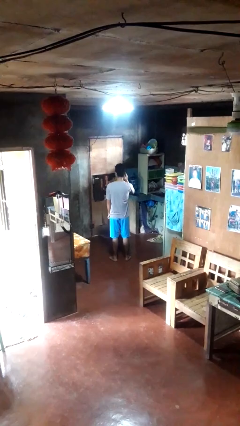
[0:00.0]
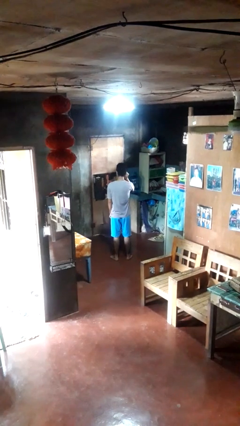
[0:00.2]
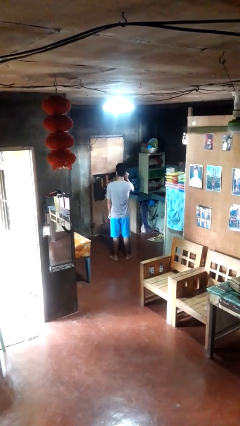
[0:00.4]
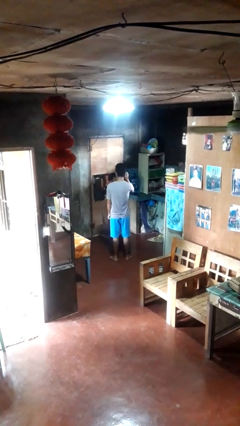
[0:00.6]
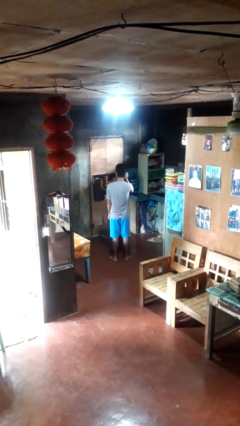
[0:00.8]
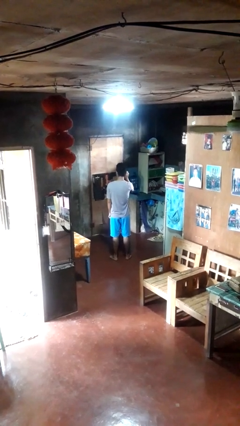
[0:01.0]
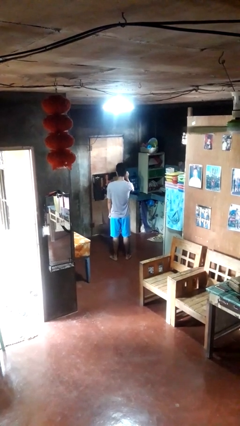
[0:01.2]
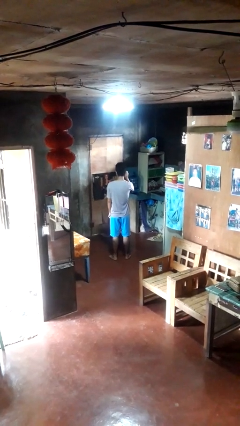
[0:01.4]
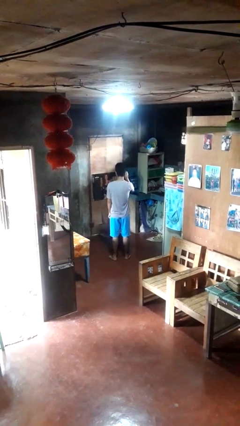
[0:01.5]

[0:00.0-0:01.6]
person touches earlobe

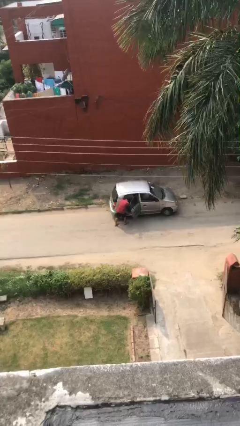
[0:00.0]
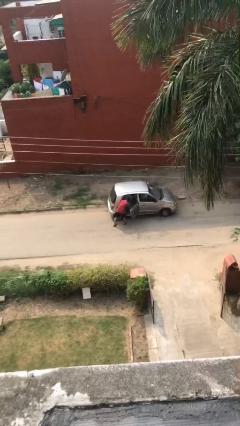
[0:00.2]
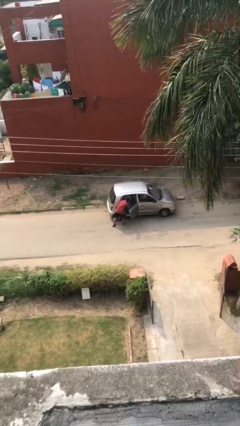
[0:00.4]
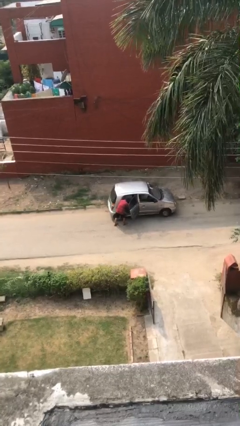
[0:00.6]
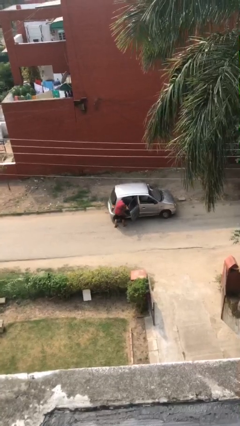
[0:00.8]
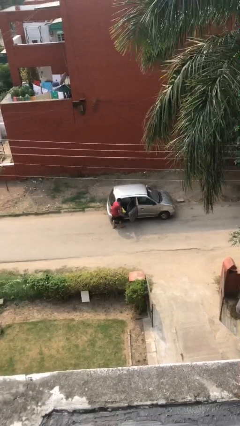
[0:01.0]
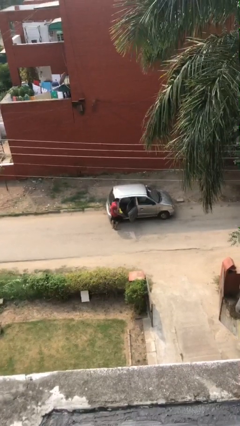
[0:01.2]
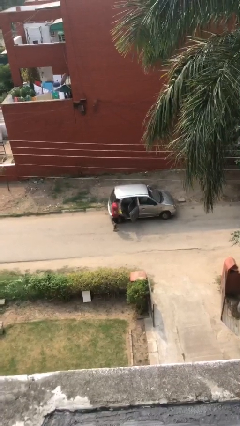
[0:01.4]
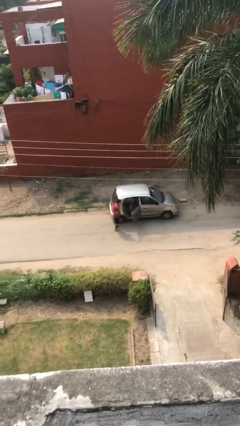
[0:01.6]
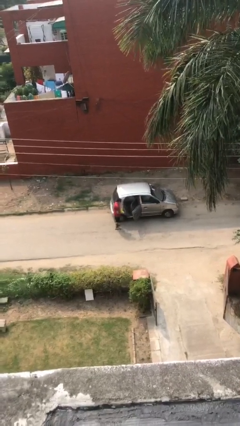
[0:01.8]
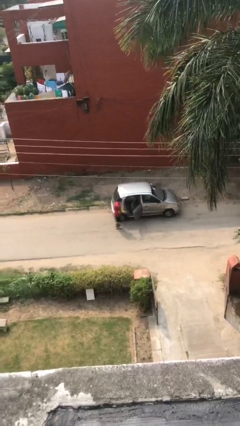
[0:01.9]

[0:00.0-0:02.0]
person unloads car

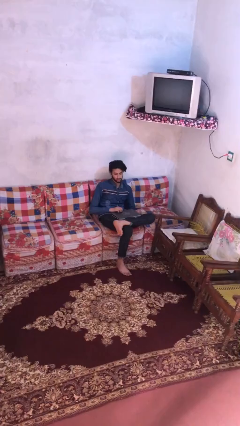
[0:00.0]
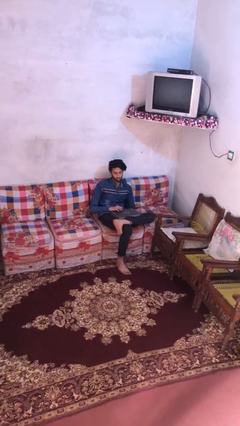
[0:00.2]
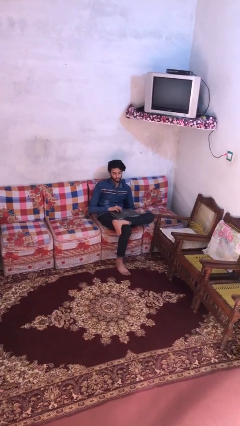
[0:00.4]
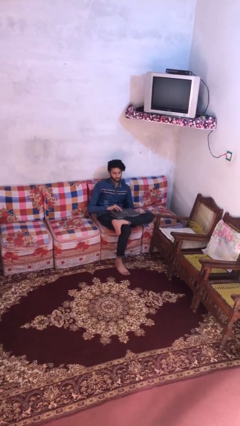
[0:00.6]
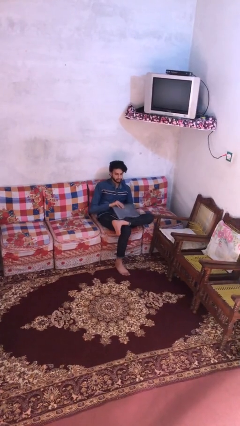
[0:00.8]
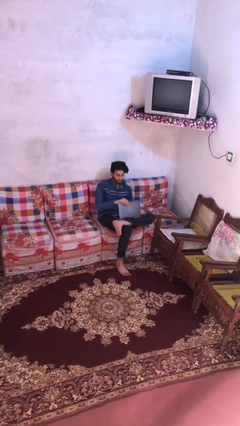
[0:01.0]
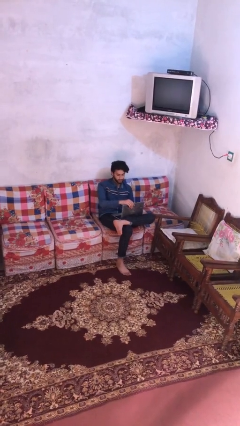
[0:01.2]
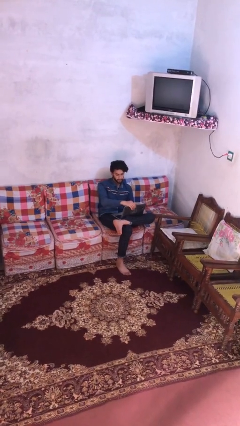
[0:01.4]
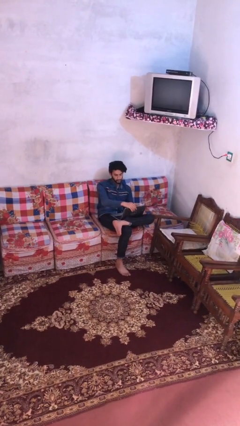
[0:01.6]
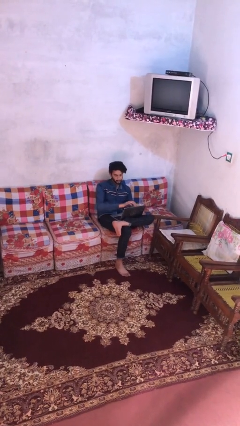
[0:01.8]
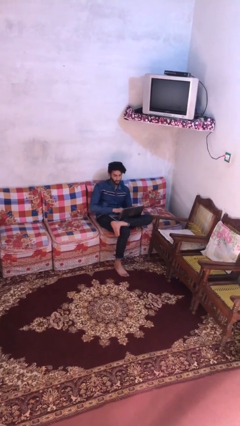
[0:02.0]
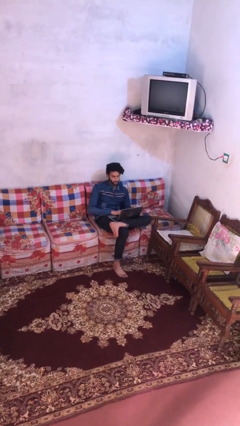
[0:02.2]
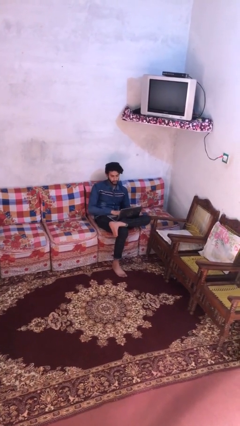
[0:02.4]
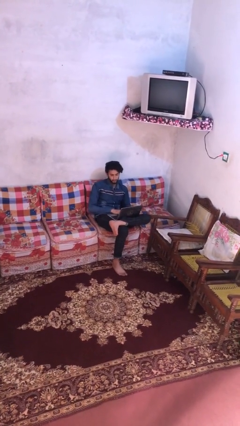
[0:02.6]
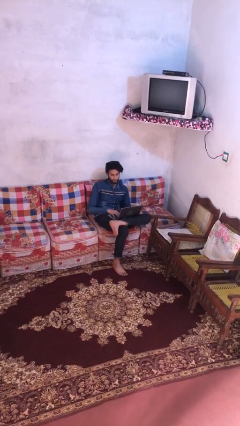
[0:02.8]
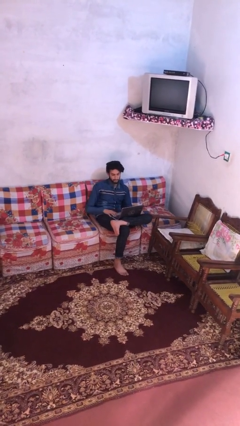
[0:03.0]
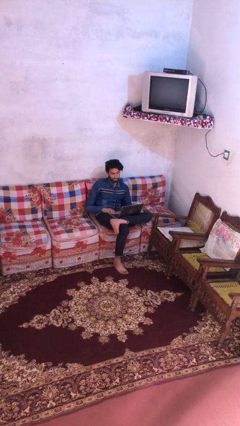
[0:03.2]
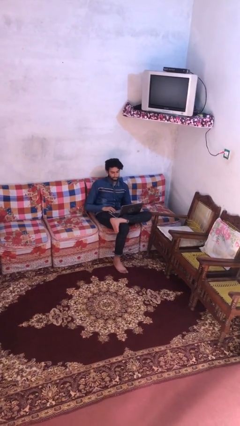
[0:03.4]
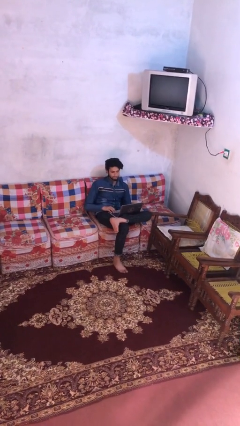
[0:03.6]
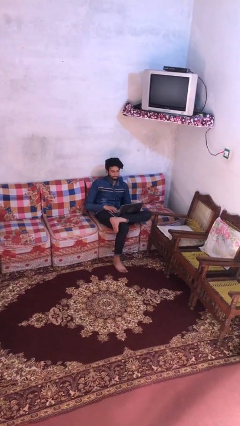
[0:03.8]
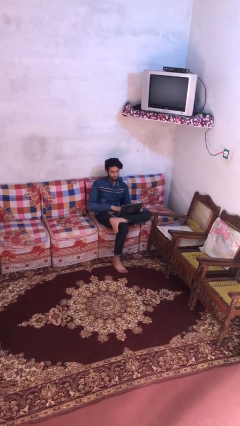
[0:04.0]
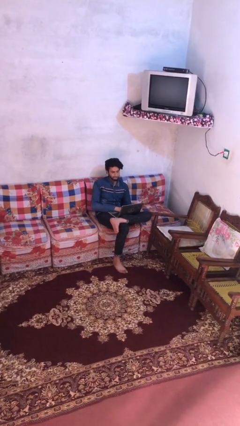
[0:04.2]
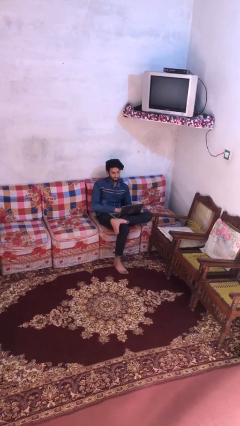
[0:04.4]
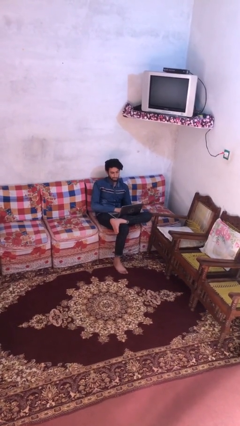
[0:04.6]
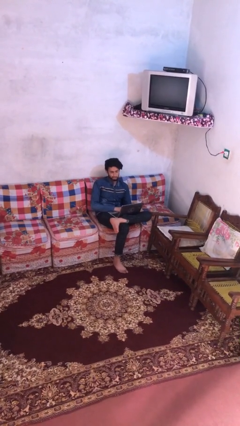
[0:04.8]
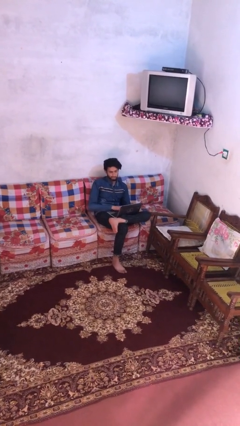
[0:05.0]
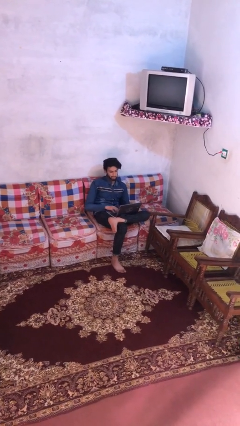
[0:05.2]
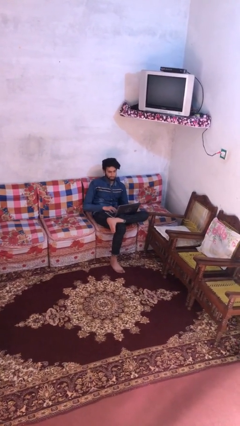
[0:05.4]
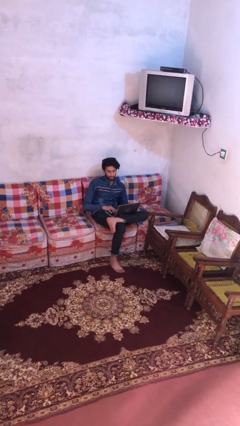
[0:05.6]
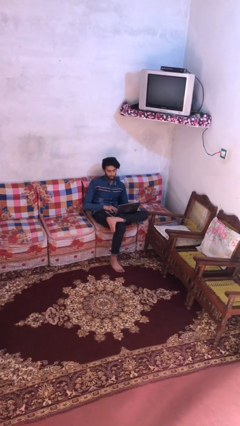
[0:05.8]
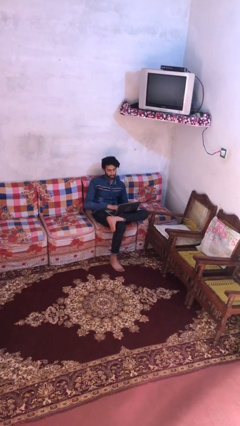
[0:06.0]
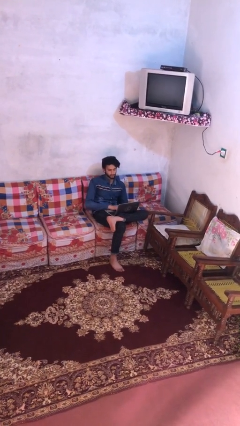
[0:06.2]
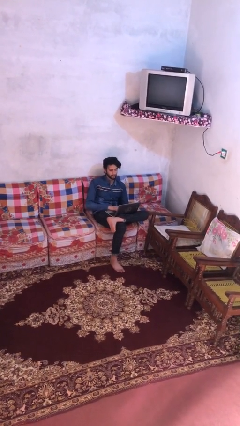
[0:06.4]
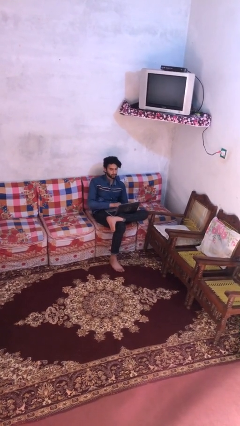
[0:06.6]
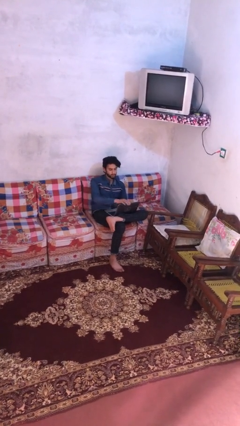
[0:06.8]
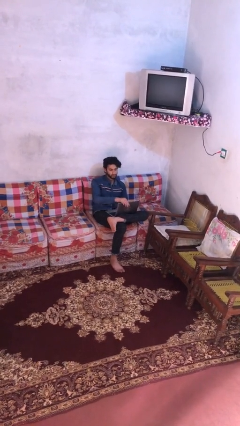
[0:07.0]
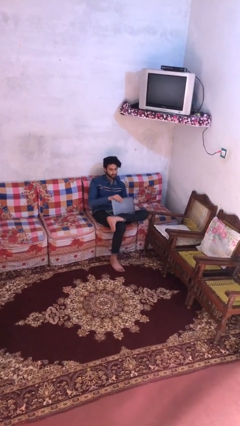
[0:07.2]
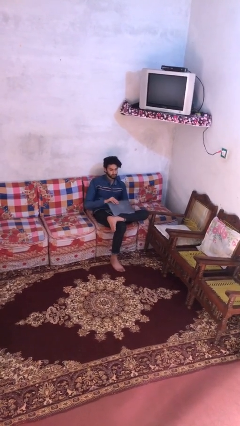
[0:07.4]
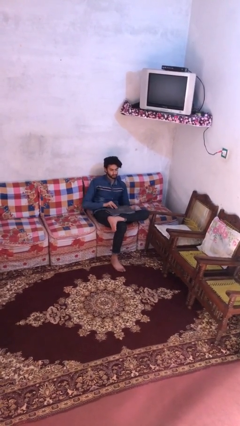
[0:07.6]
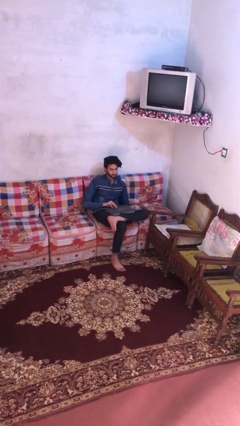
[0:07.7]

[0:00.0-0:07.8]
person interacts with laptop

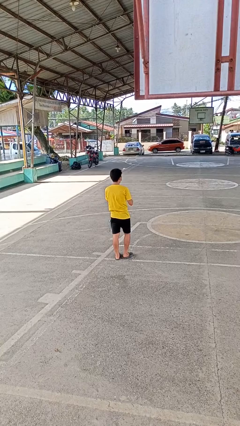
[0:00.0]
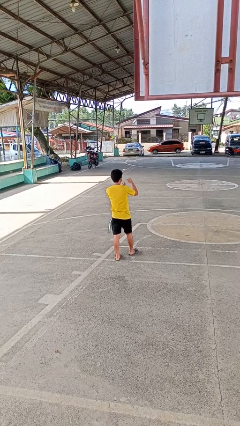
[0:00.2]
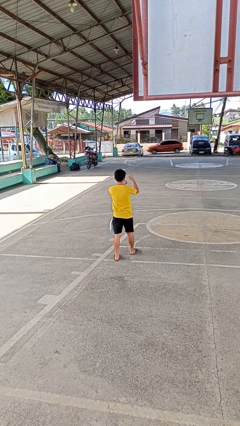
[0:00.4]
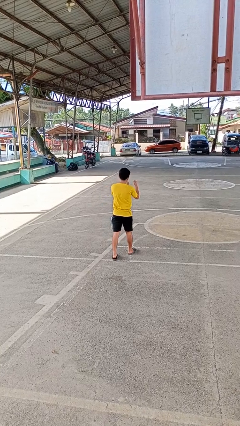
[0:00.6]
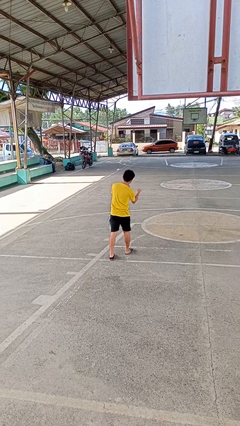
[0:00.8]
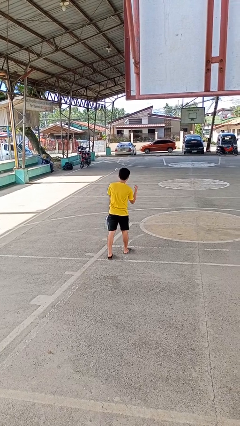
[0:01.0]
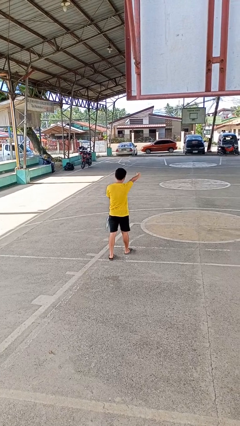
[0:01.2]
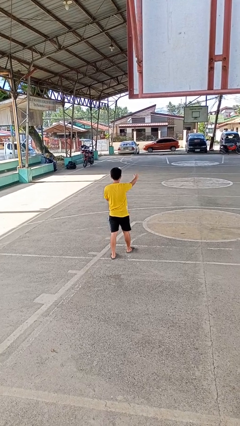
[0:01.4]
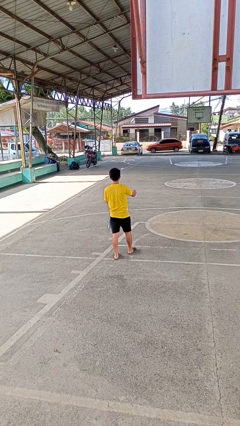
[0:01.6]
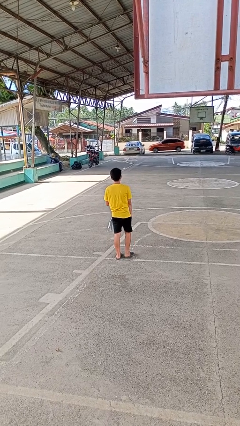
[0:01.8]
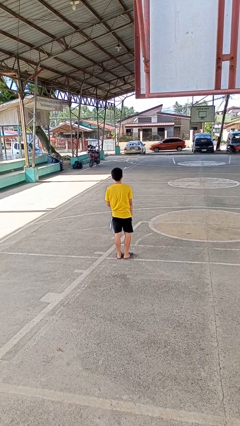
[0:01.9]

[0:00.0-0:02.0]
person punches

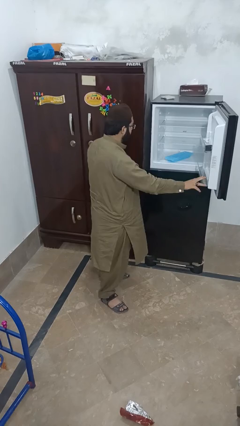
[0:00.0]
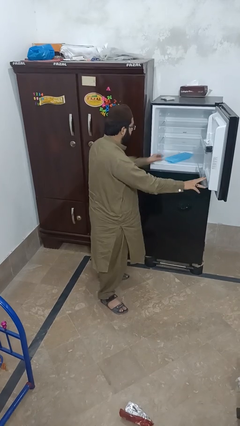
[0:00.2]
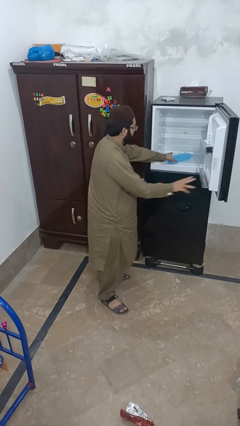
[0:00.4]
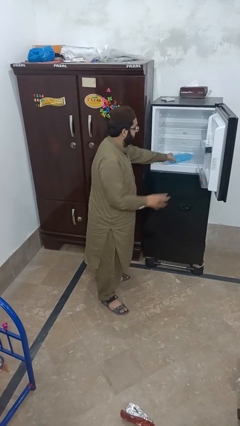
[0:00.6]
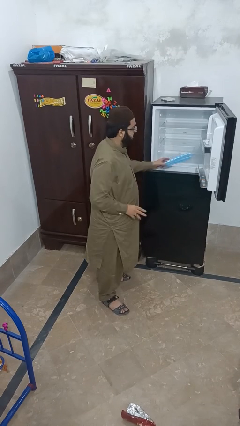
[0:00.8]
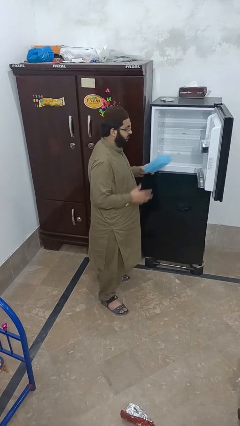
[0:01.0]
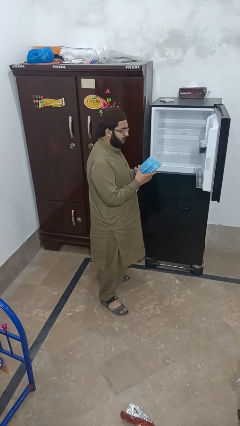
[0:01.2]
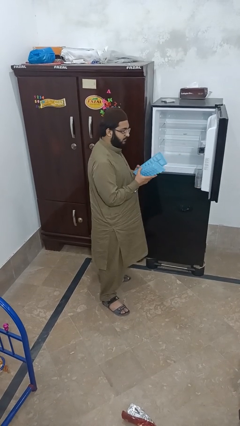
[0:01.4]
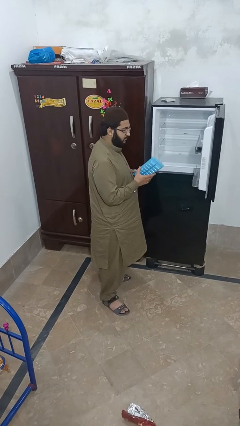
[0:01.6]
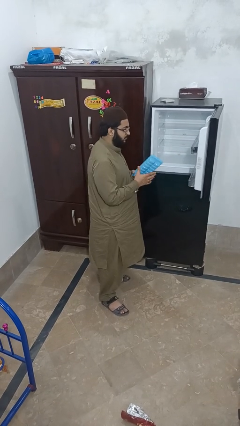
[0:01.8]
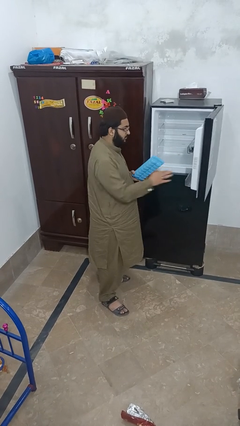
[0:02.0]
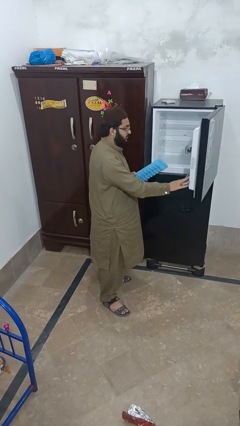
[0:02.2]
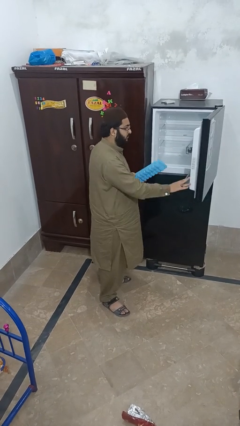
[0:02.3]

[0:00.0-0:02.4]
person takes object from refrigerator

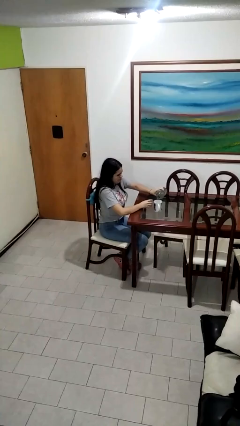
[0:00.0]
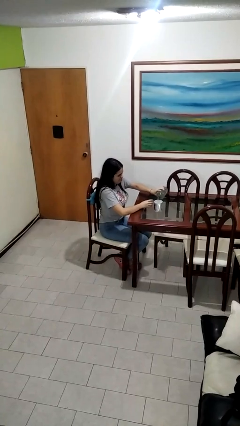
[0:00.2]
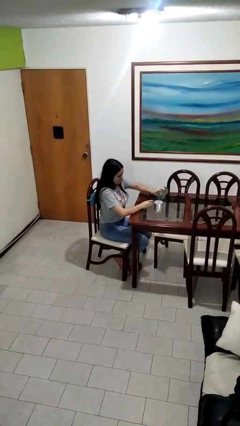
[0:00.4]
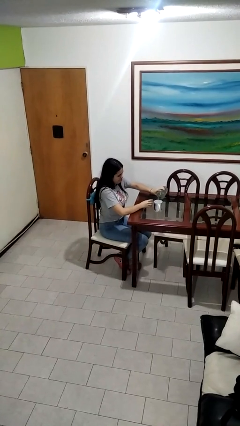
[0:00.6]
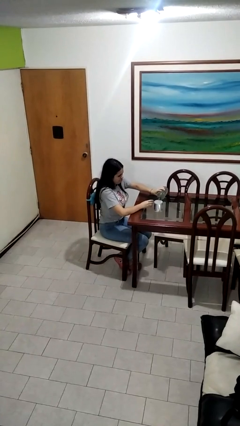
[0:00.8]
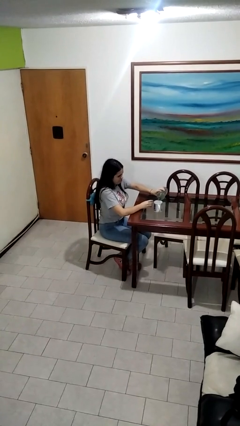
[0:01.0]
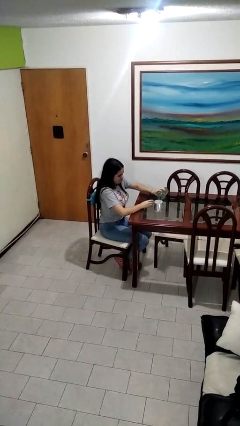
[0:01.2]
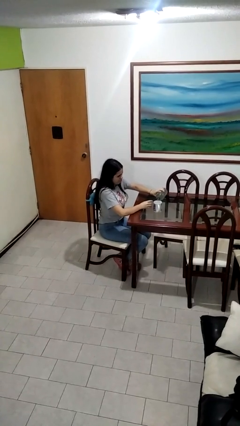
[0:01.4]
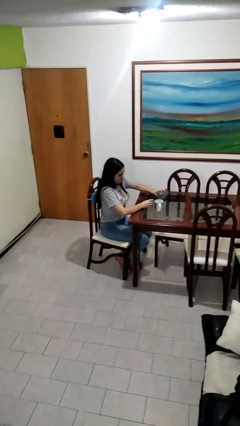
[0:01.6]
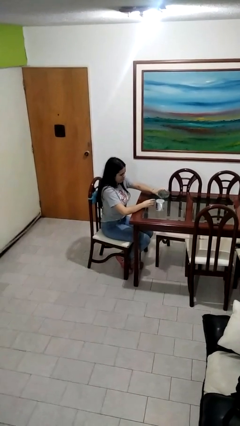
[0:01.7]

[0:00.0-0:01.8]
person pours liquid into cup

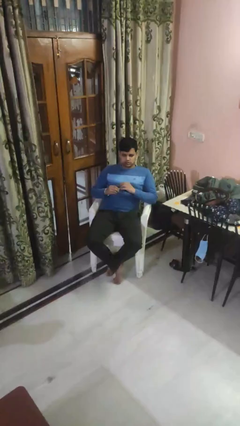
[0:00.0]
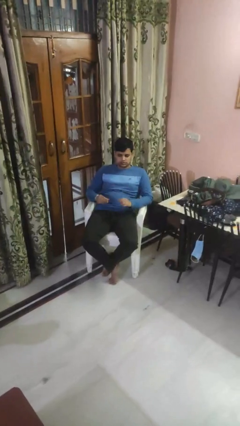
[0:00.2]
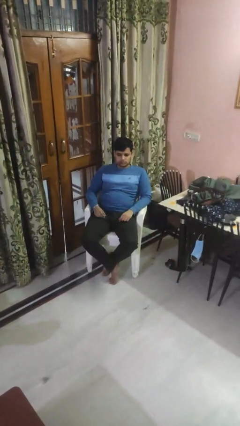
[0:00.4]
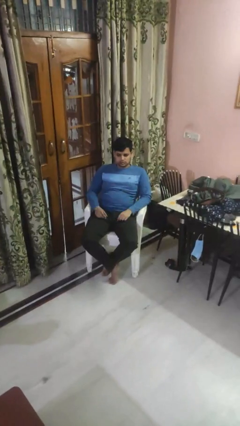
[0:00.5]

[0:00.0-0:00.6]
person takes off ring
